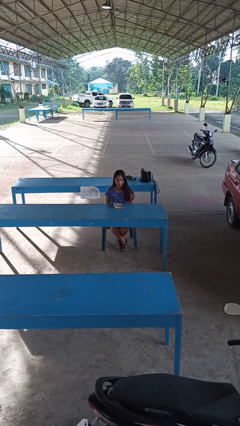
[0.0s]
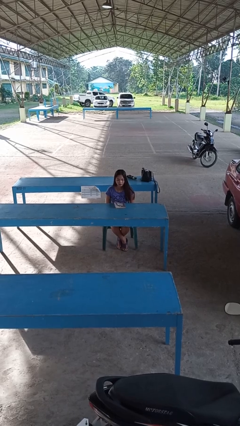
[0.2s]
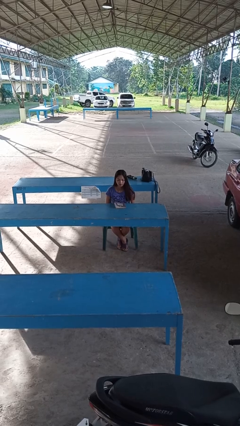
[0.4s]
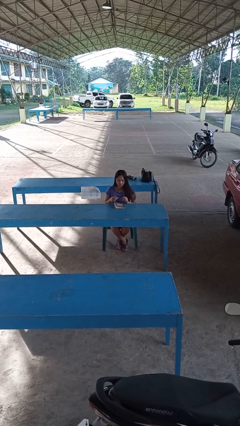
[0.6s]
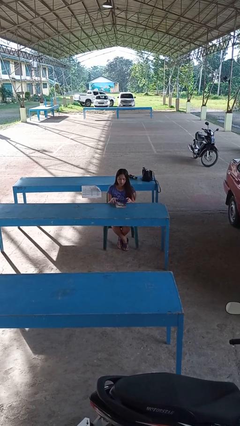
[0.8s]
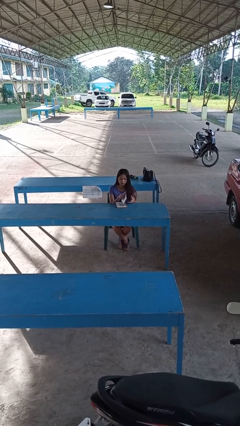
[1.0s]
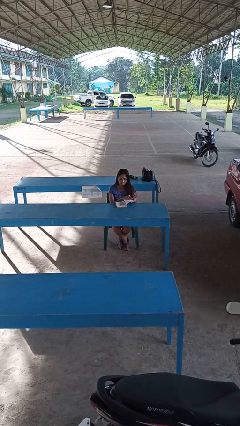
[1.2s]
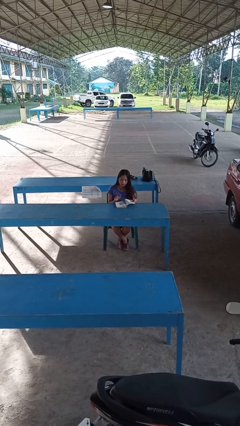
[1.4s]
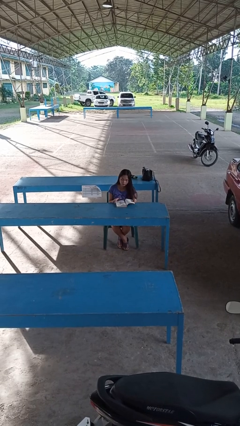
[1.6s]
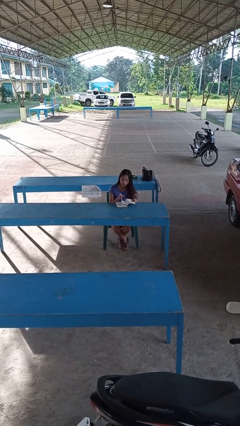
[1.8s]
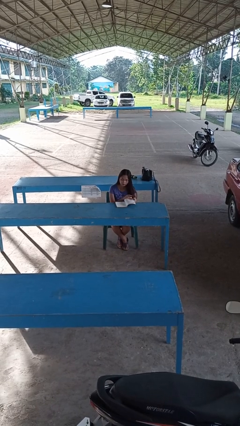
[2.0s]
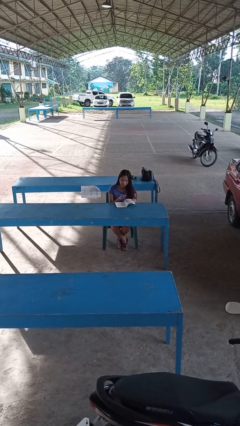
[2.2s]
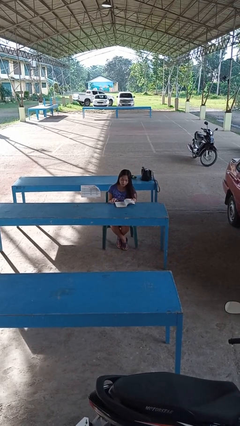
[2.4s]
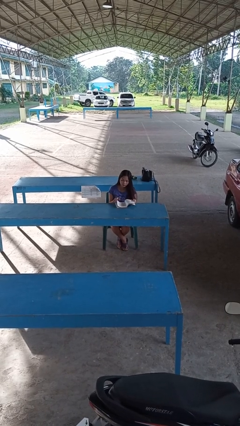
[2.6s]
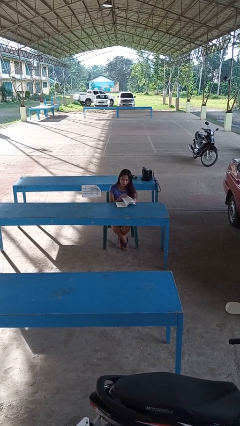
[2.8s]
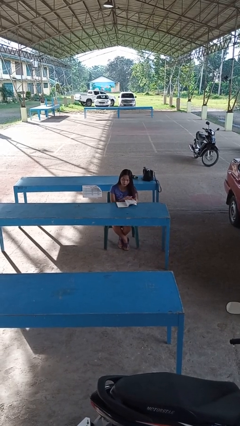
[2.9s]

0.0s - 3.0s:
person reads book

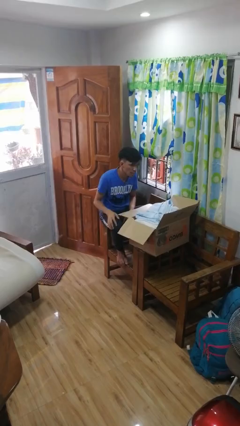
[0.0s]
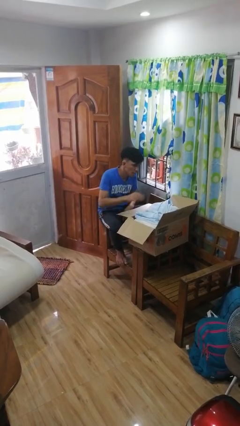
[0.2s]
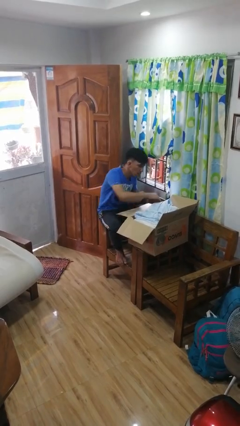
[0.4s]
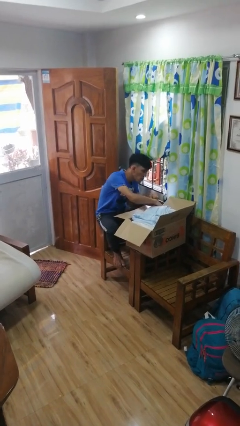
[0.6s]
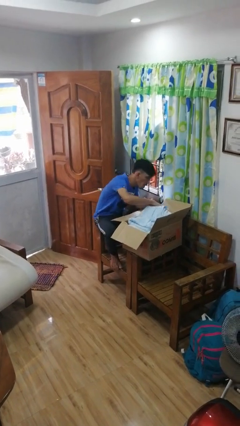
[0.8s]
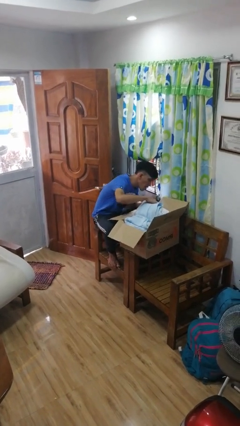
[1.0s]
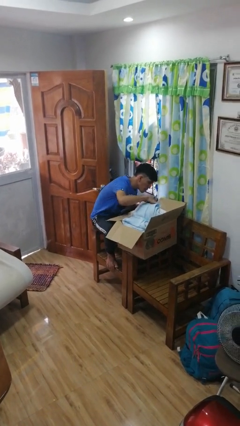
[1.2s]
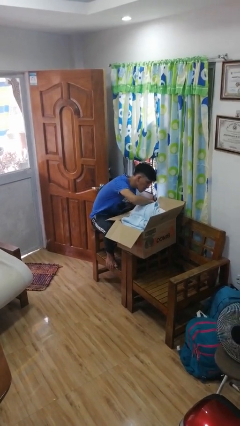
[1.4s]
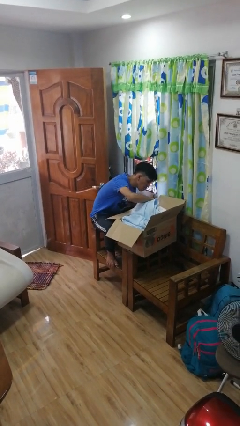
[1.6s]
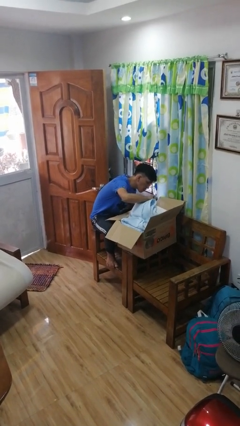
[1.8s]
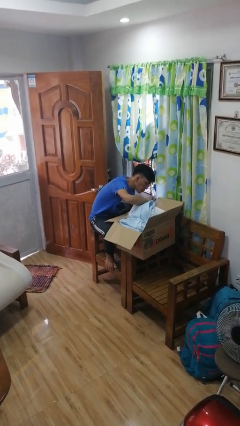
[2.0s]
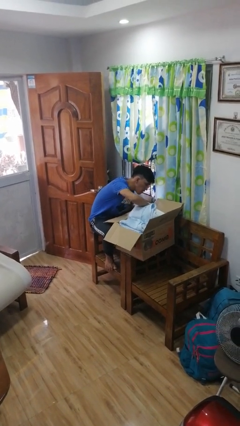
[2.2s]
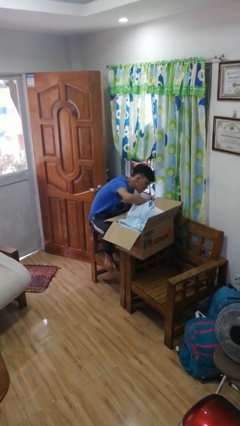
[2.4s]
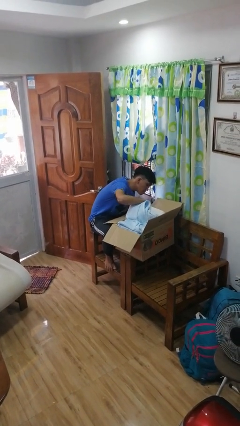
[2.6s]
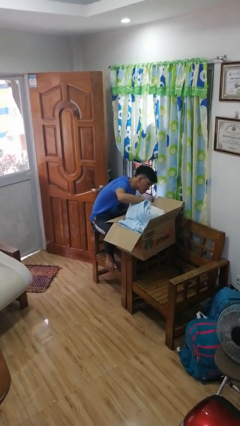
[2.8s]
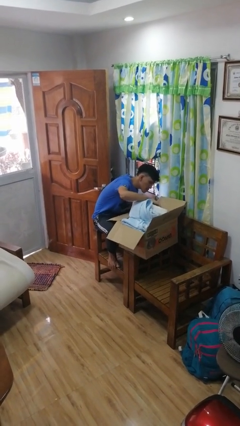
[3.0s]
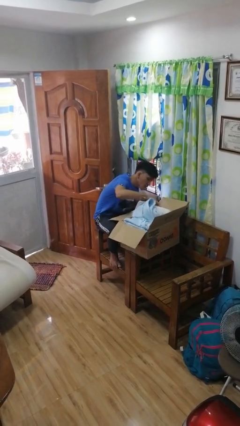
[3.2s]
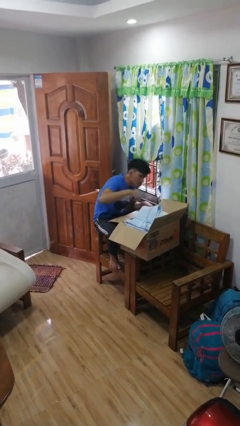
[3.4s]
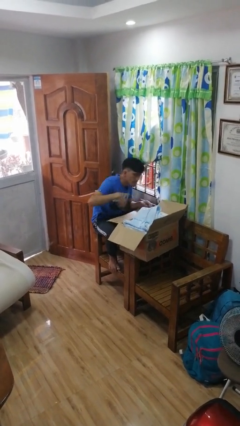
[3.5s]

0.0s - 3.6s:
person searches in box

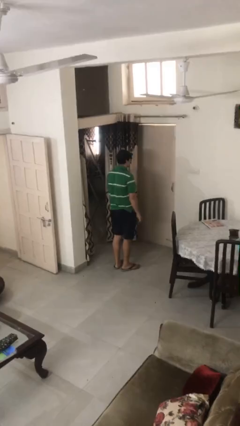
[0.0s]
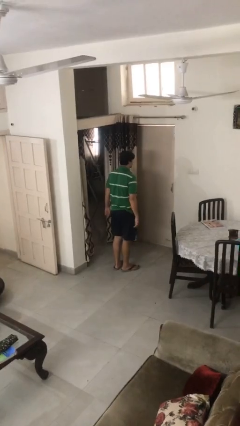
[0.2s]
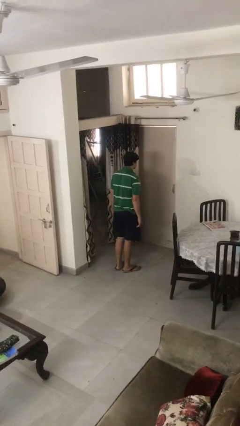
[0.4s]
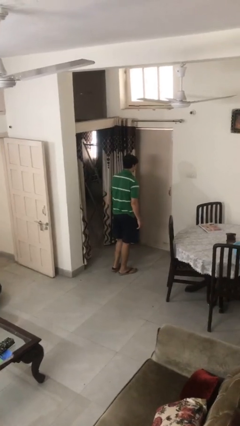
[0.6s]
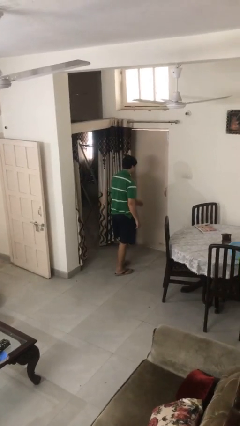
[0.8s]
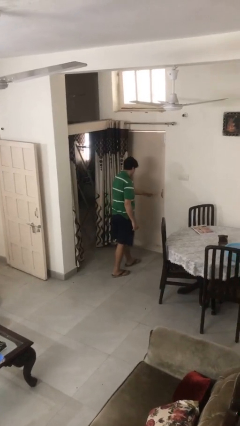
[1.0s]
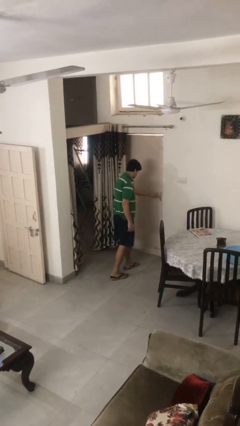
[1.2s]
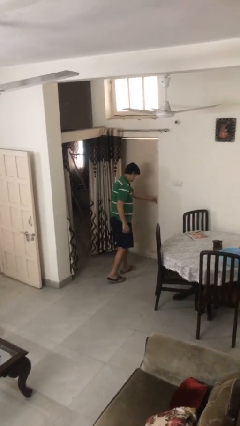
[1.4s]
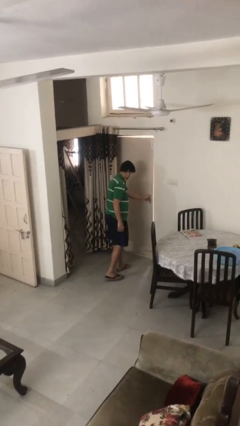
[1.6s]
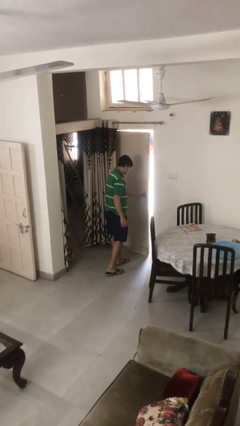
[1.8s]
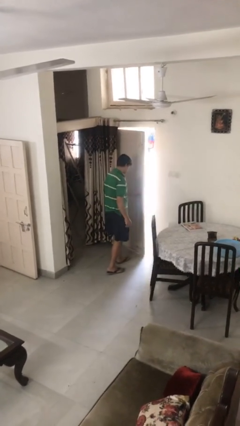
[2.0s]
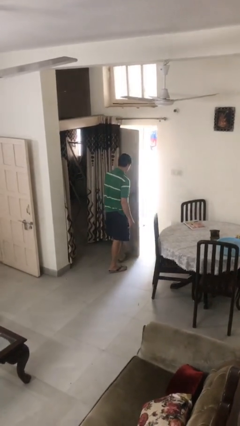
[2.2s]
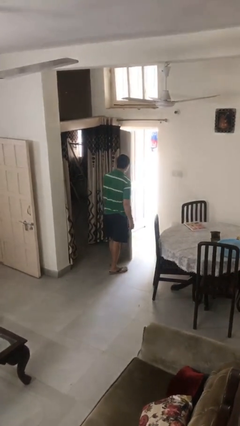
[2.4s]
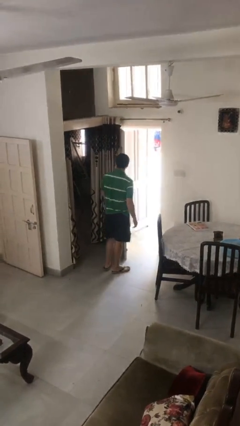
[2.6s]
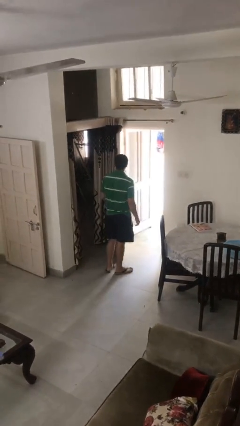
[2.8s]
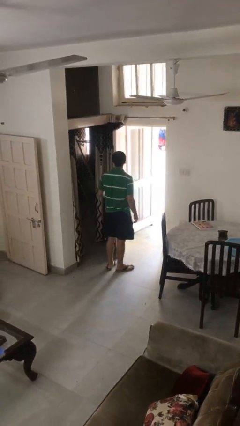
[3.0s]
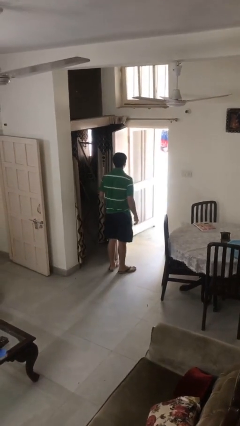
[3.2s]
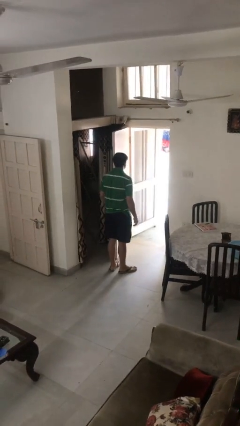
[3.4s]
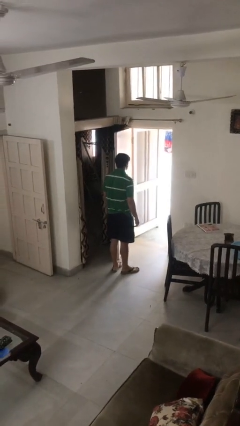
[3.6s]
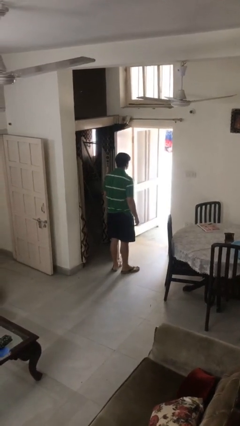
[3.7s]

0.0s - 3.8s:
person opens facility door

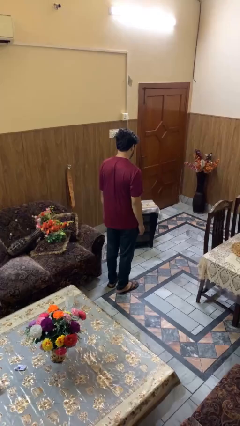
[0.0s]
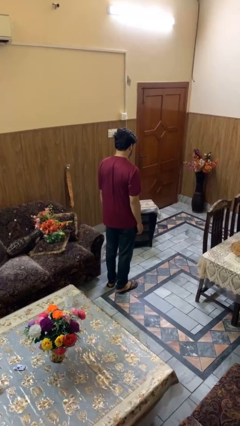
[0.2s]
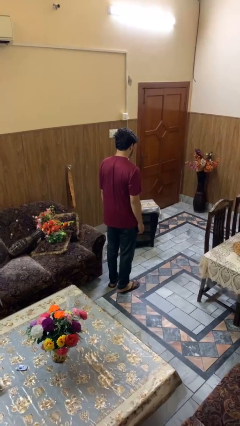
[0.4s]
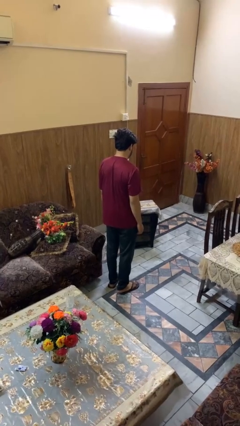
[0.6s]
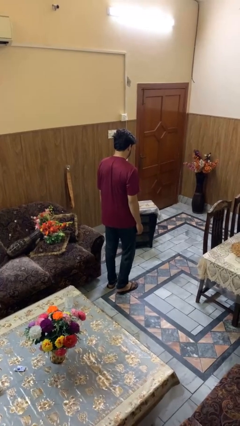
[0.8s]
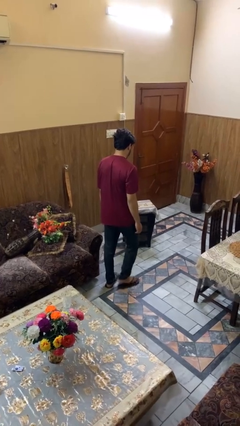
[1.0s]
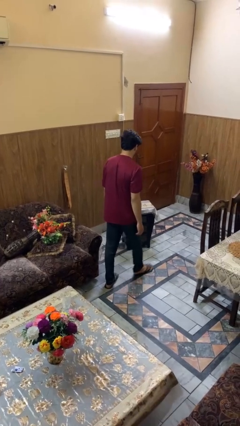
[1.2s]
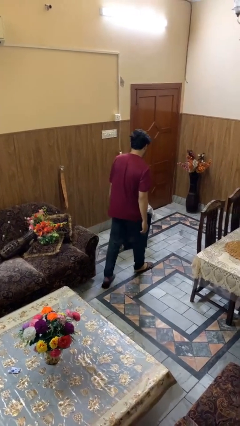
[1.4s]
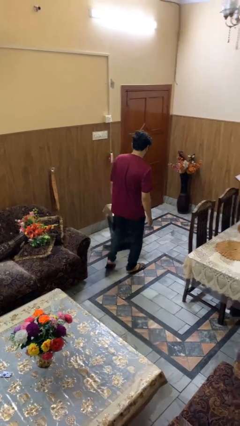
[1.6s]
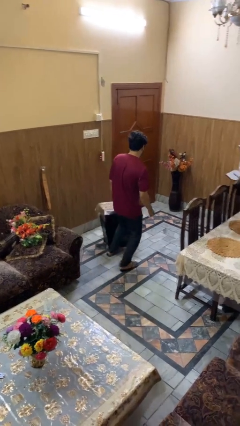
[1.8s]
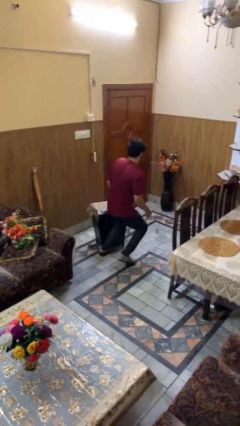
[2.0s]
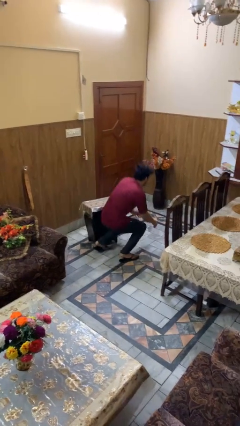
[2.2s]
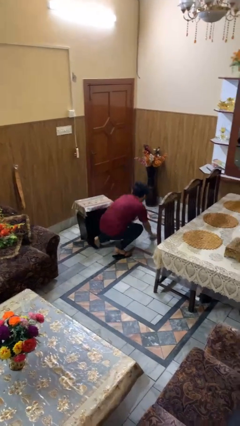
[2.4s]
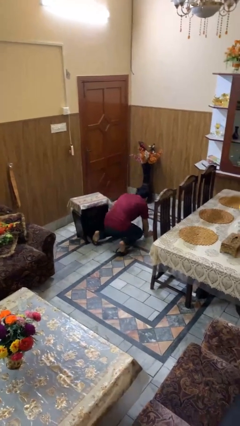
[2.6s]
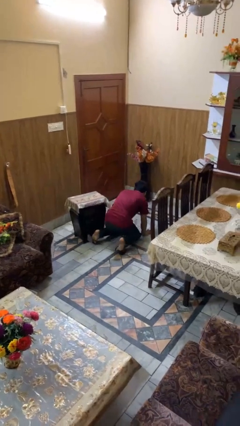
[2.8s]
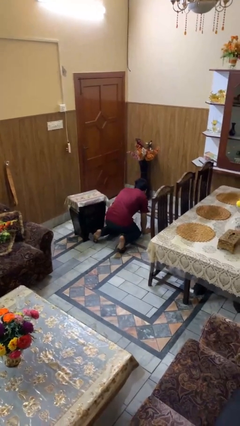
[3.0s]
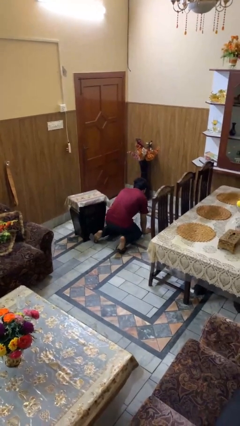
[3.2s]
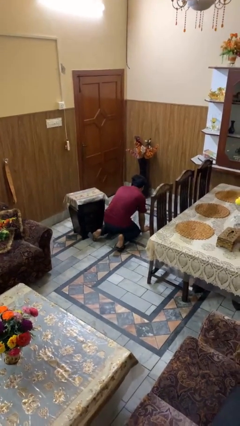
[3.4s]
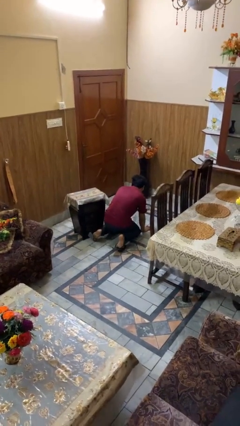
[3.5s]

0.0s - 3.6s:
person trips on object on floor

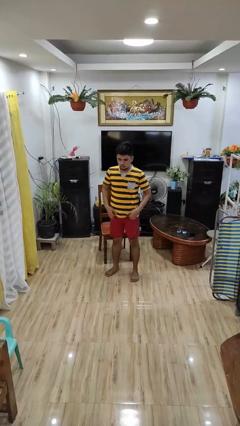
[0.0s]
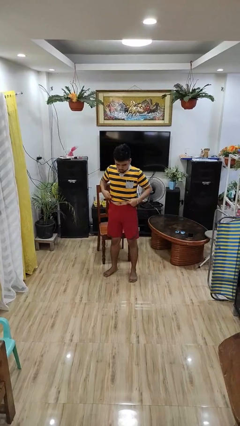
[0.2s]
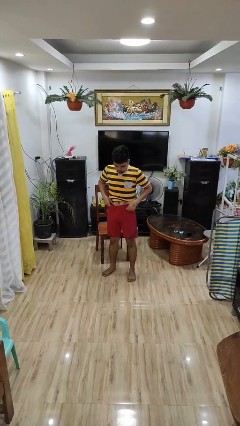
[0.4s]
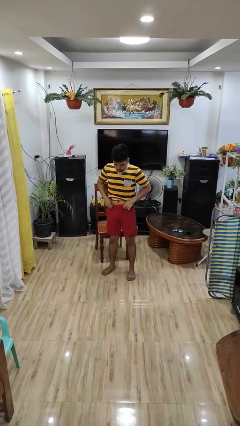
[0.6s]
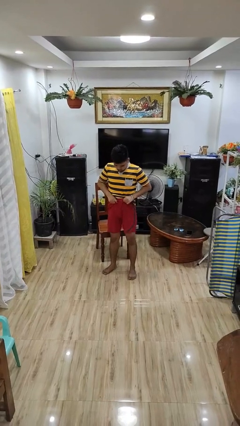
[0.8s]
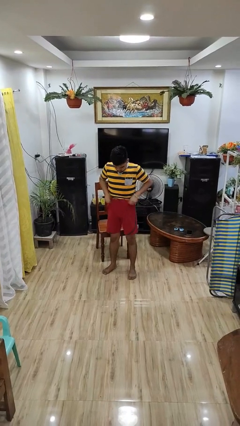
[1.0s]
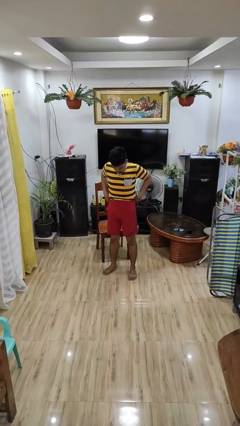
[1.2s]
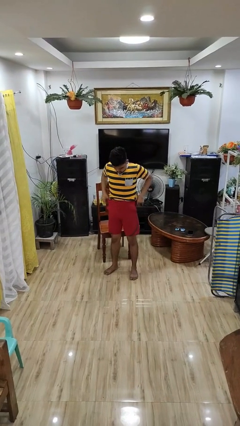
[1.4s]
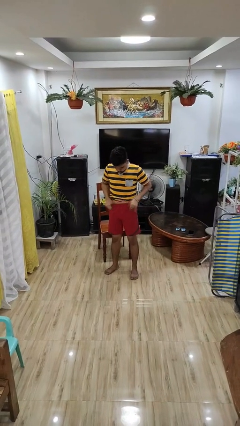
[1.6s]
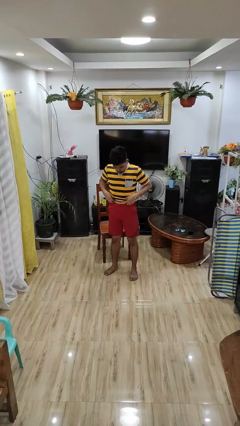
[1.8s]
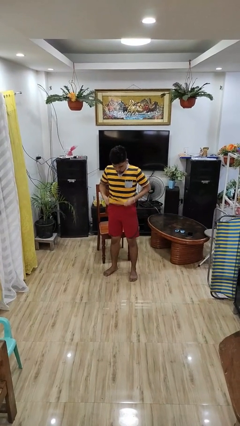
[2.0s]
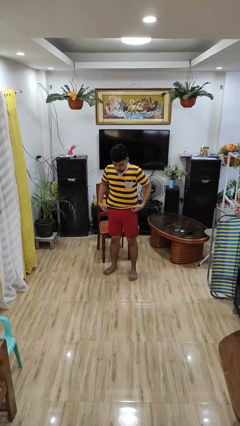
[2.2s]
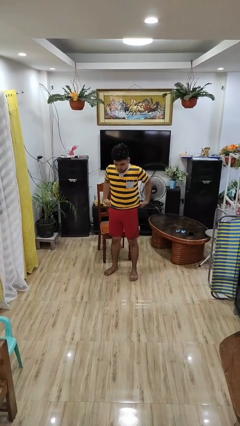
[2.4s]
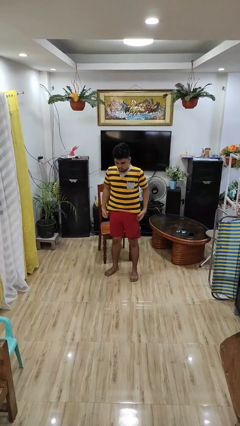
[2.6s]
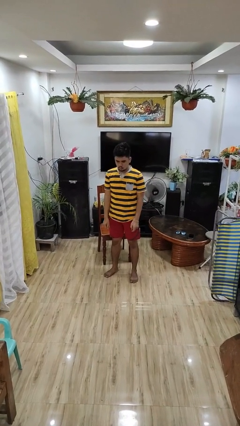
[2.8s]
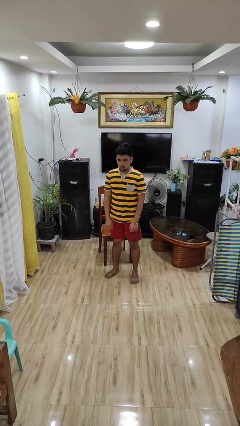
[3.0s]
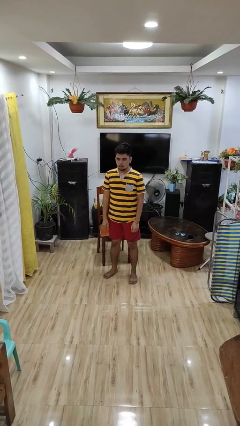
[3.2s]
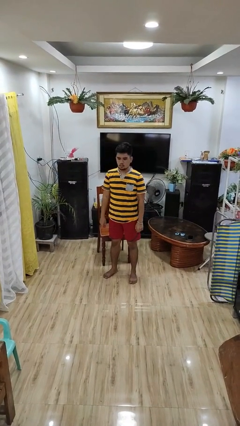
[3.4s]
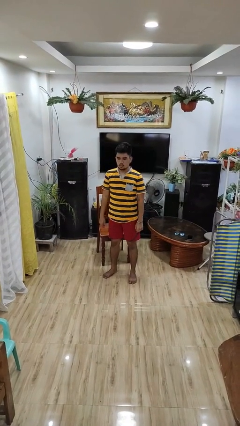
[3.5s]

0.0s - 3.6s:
person hikes up pants

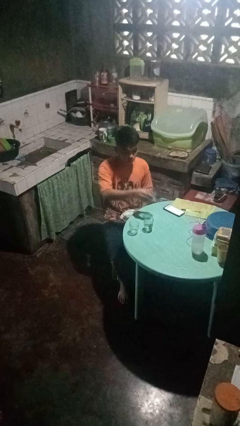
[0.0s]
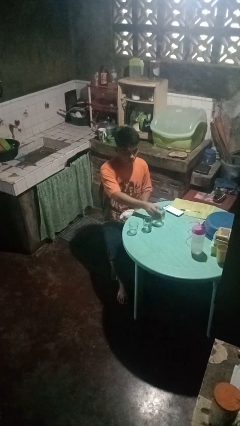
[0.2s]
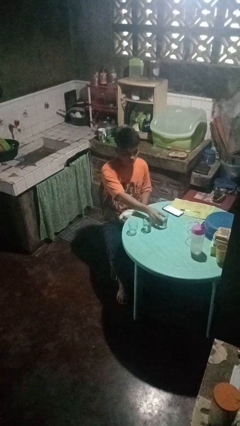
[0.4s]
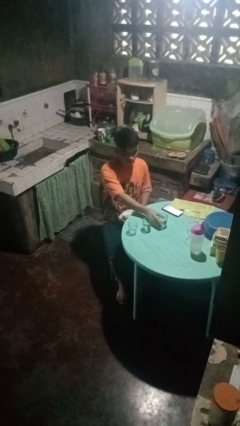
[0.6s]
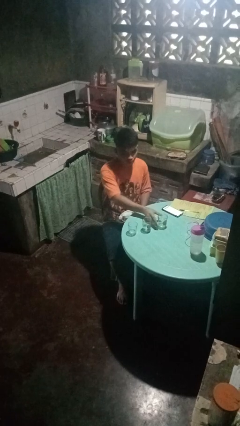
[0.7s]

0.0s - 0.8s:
person puts down object on table
